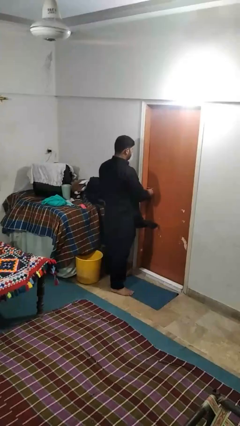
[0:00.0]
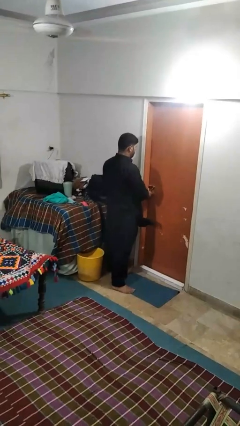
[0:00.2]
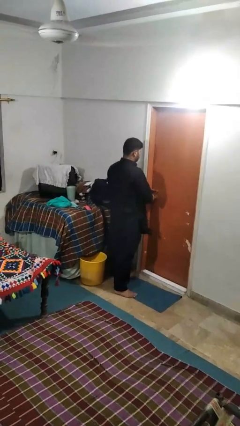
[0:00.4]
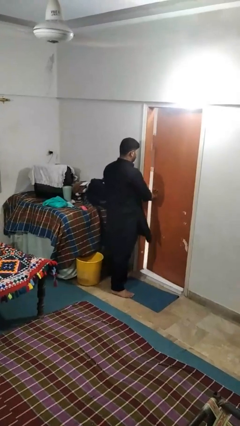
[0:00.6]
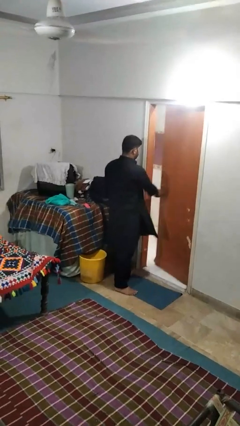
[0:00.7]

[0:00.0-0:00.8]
person opens facility door

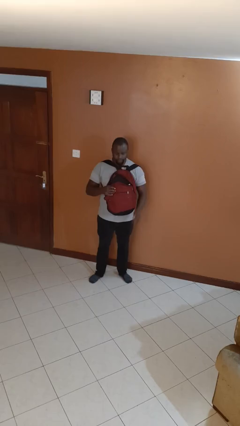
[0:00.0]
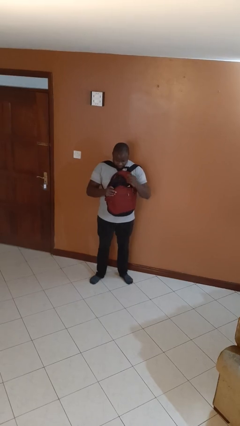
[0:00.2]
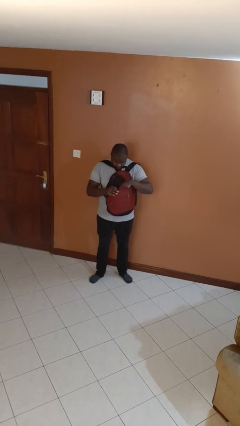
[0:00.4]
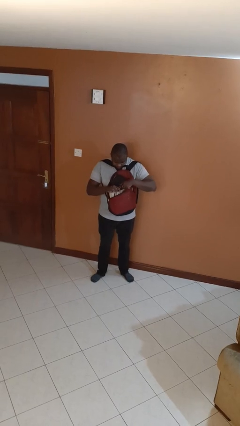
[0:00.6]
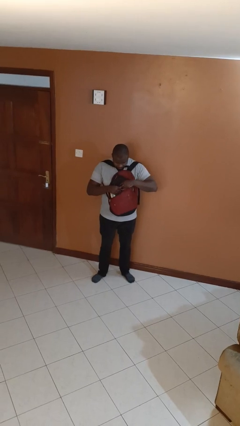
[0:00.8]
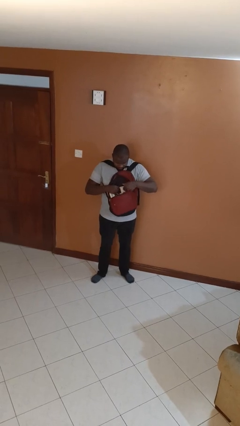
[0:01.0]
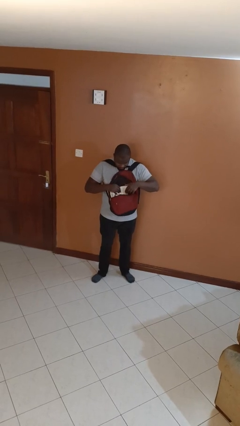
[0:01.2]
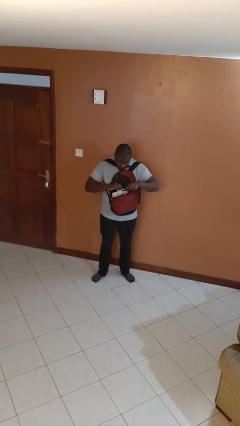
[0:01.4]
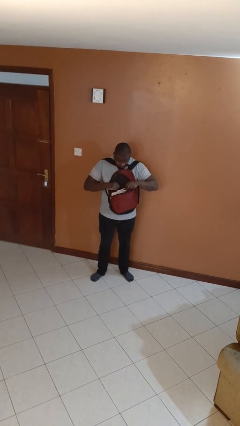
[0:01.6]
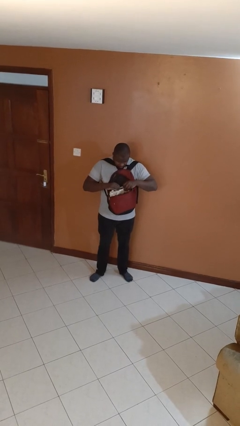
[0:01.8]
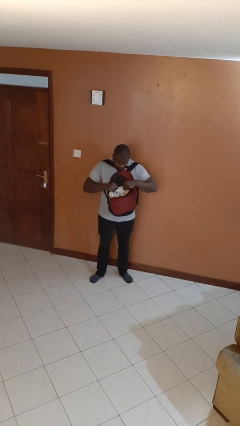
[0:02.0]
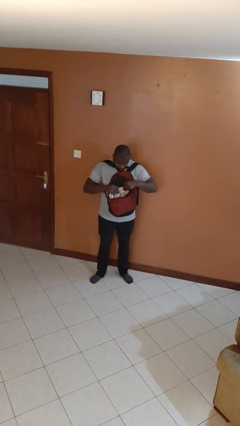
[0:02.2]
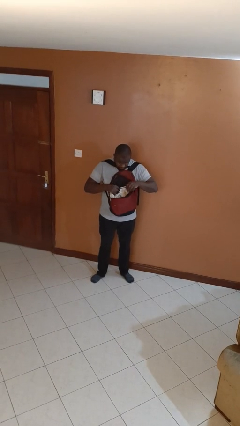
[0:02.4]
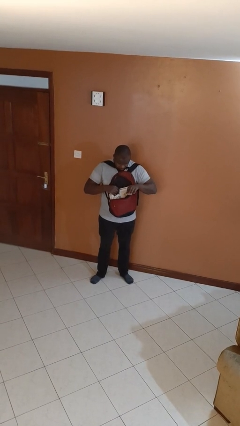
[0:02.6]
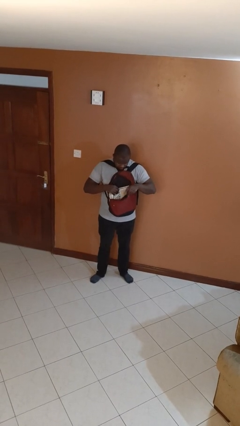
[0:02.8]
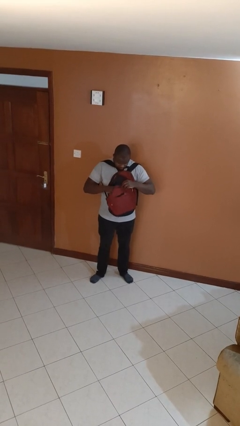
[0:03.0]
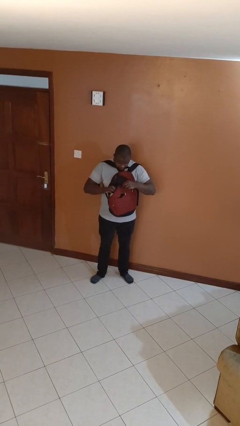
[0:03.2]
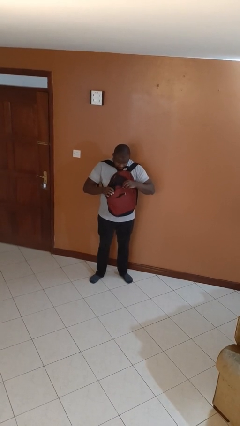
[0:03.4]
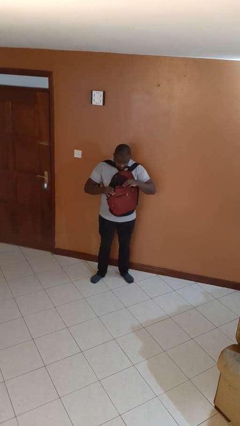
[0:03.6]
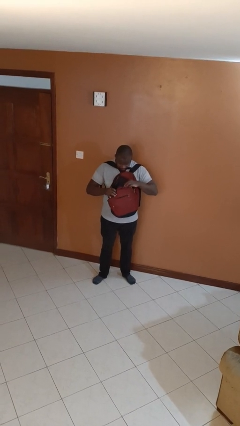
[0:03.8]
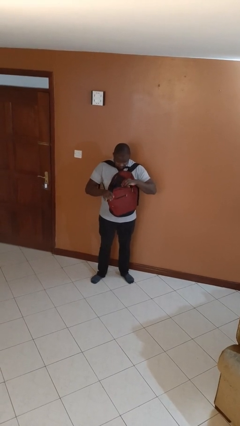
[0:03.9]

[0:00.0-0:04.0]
person searches in backpack

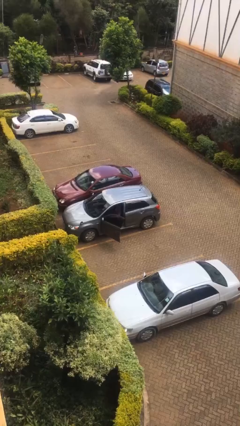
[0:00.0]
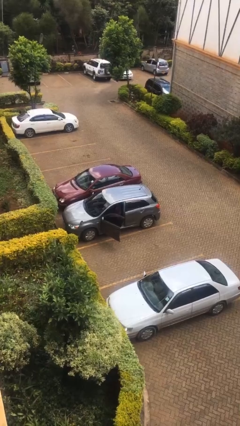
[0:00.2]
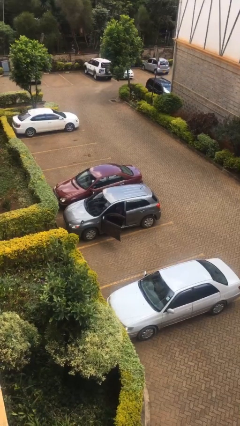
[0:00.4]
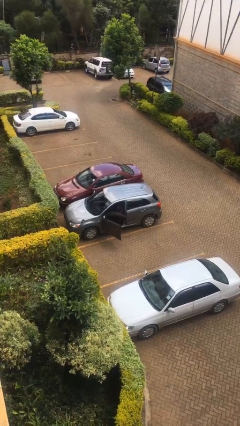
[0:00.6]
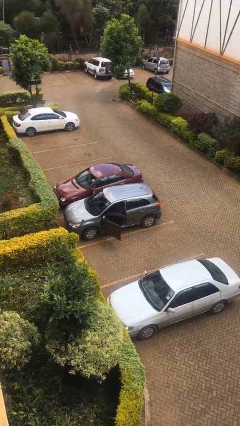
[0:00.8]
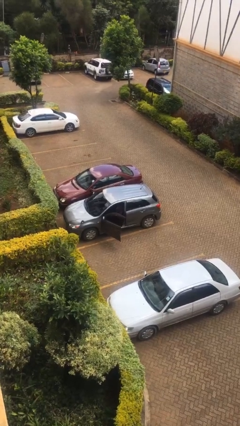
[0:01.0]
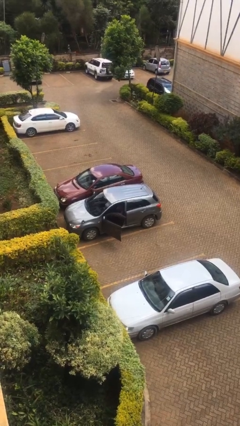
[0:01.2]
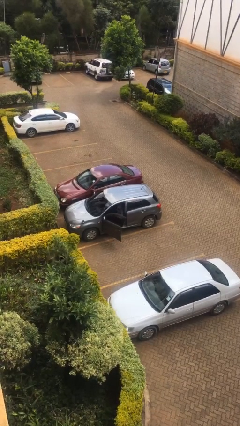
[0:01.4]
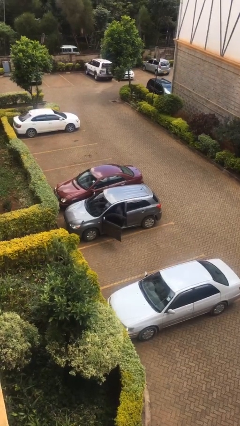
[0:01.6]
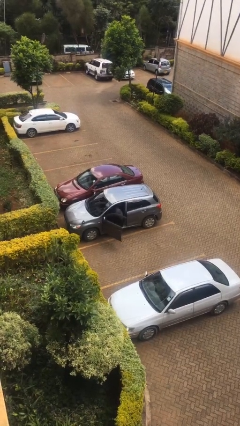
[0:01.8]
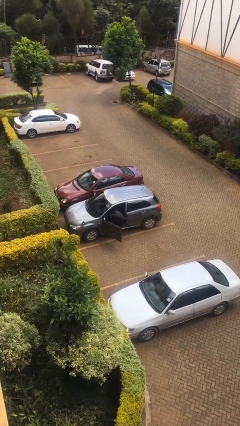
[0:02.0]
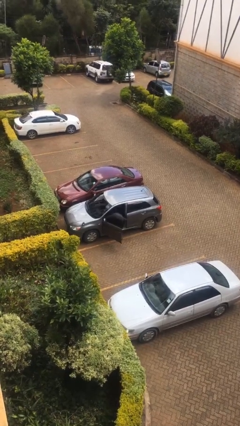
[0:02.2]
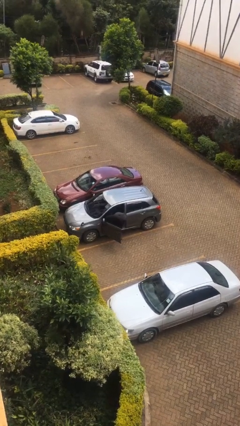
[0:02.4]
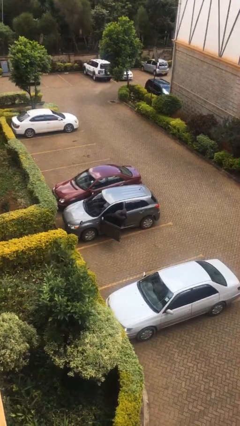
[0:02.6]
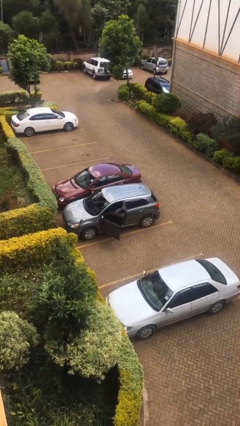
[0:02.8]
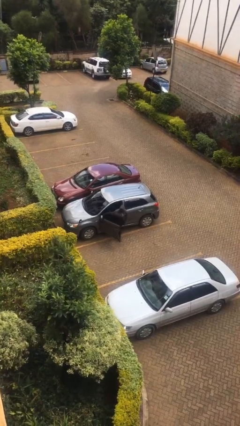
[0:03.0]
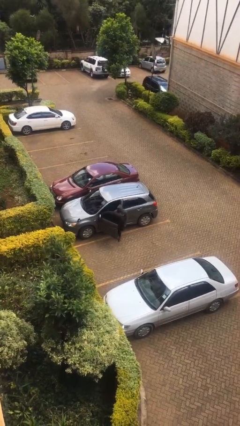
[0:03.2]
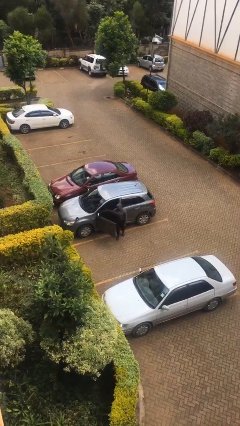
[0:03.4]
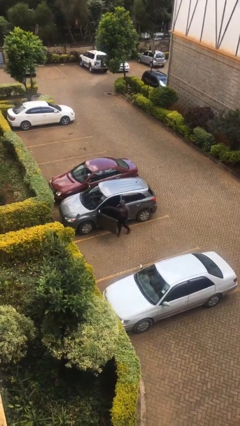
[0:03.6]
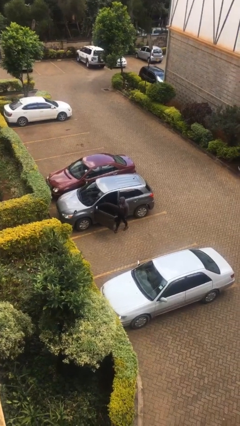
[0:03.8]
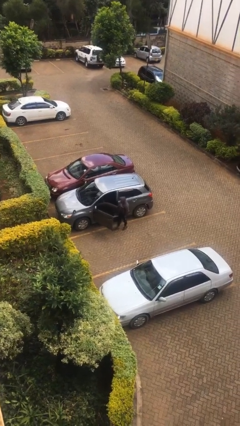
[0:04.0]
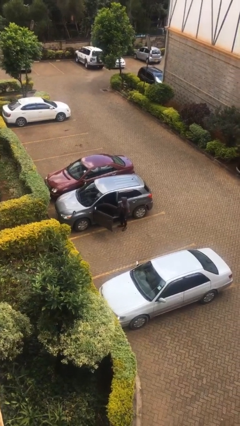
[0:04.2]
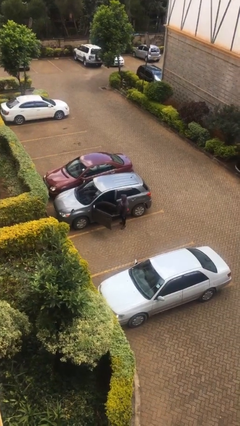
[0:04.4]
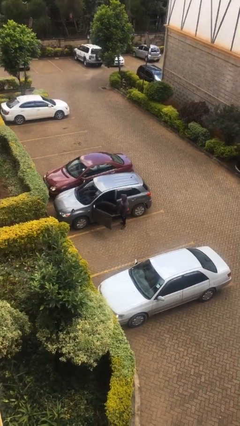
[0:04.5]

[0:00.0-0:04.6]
person exits car

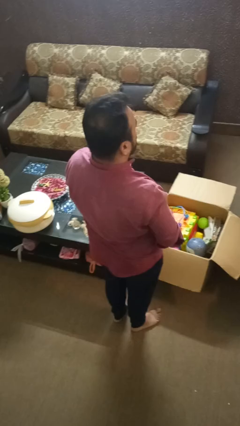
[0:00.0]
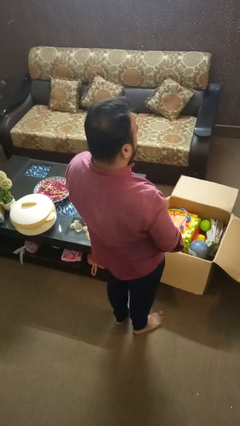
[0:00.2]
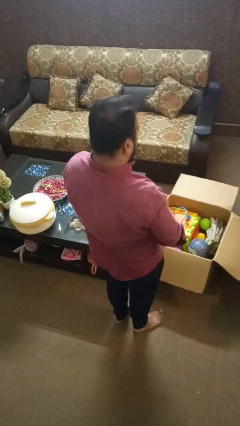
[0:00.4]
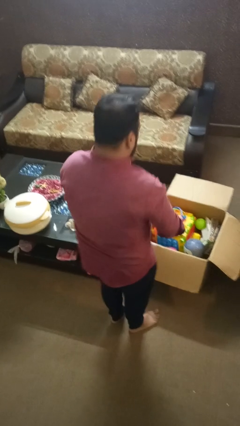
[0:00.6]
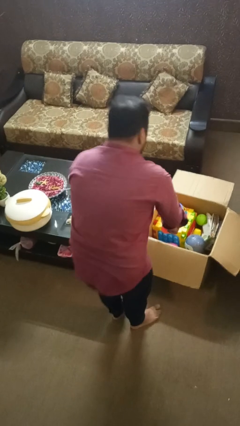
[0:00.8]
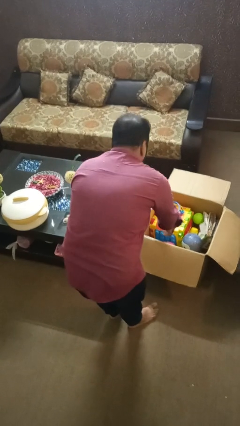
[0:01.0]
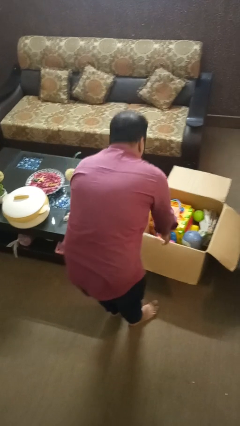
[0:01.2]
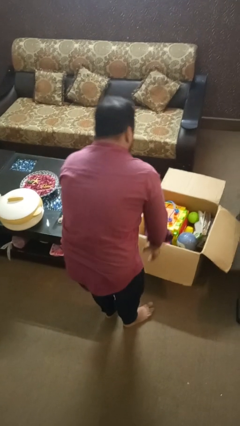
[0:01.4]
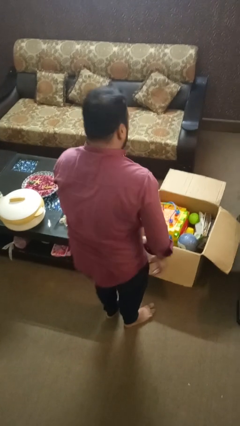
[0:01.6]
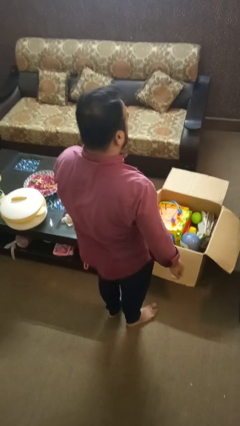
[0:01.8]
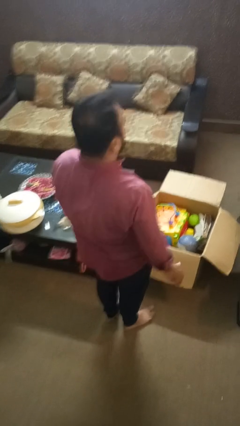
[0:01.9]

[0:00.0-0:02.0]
person puts object into box

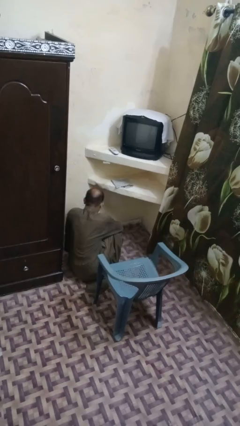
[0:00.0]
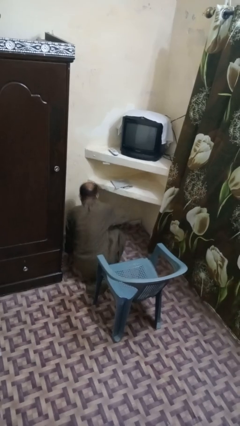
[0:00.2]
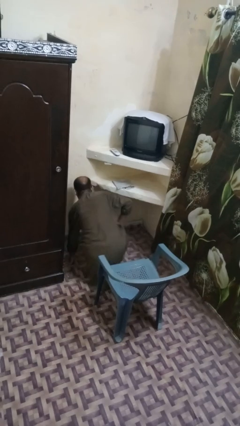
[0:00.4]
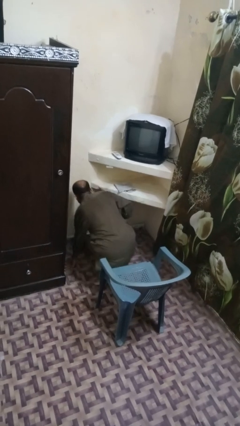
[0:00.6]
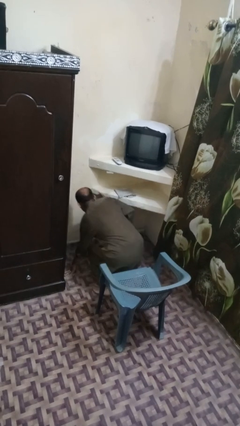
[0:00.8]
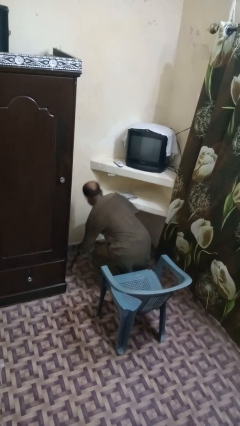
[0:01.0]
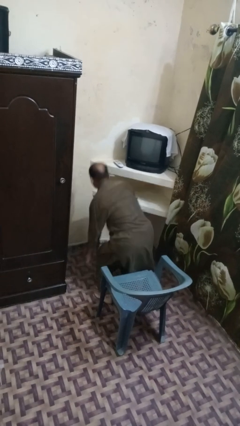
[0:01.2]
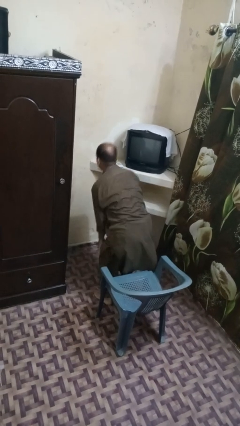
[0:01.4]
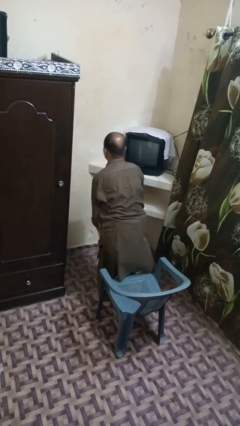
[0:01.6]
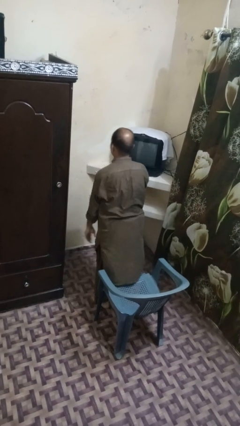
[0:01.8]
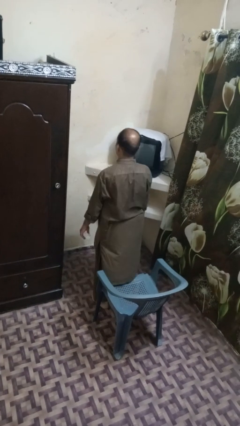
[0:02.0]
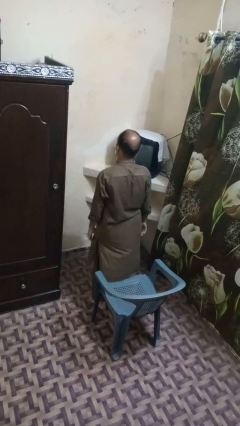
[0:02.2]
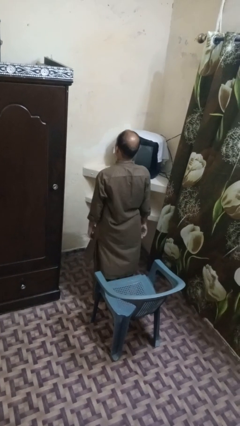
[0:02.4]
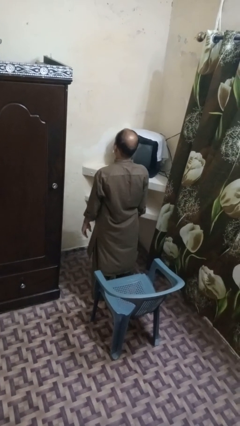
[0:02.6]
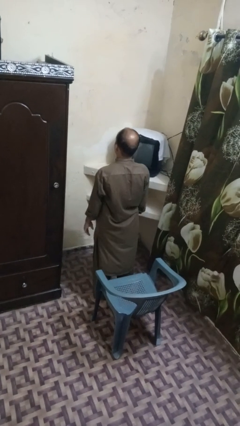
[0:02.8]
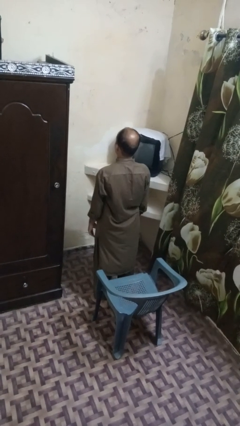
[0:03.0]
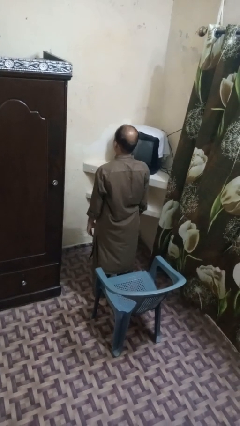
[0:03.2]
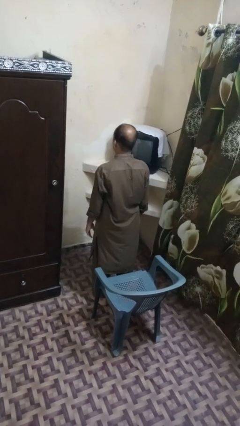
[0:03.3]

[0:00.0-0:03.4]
person stands up from floor

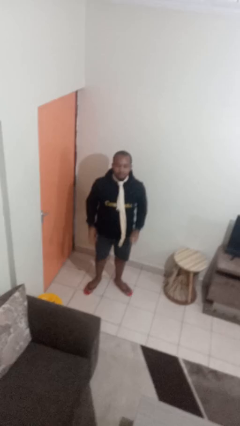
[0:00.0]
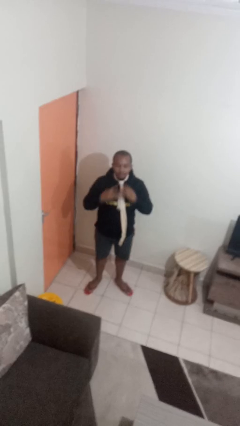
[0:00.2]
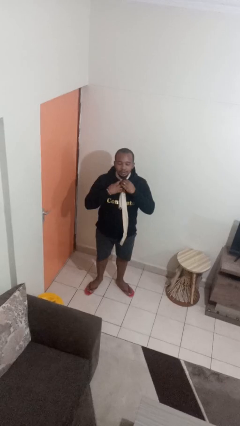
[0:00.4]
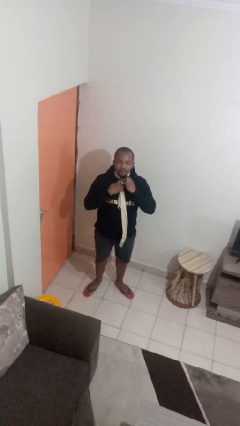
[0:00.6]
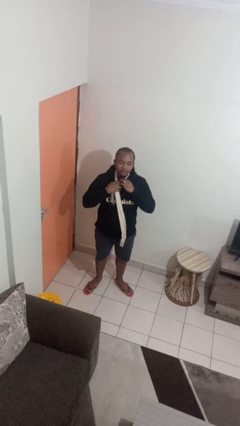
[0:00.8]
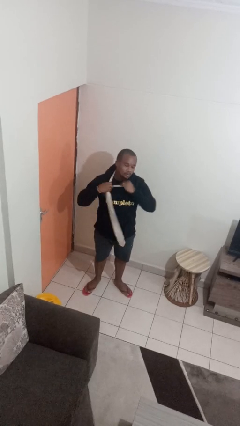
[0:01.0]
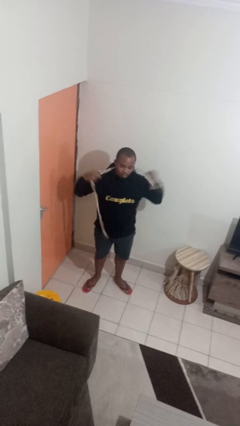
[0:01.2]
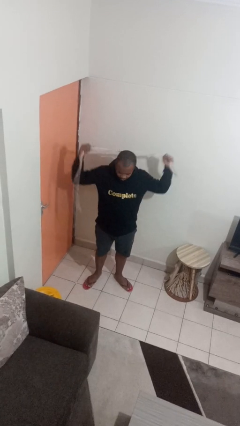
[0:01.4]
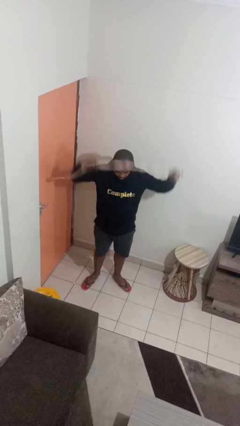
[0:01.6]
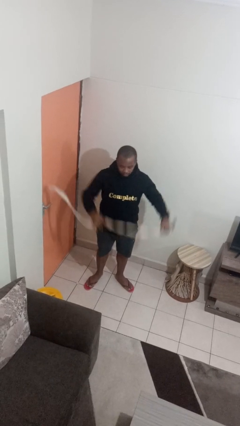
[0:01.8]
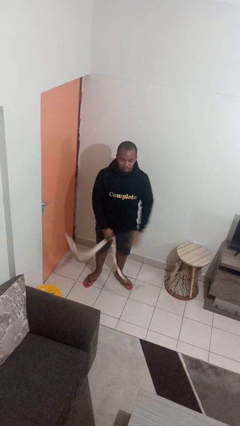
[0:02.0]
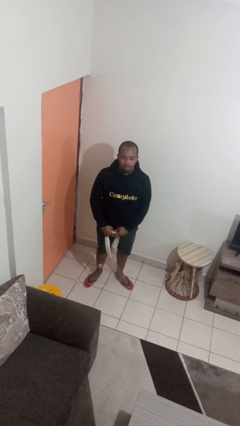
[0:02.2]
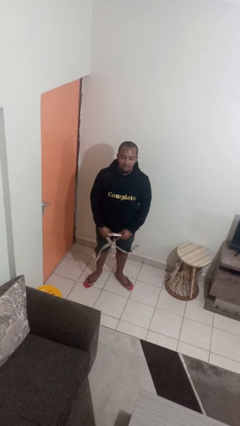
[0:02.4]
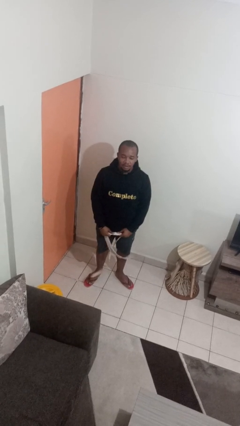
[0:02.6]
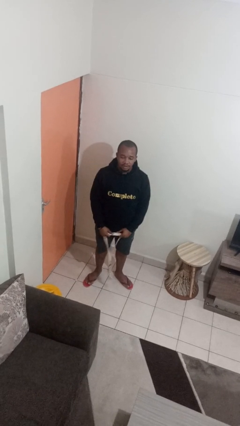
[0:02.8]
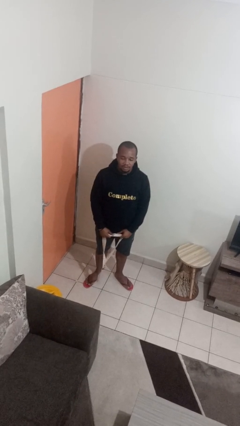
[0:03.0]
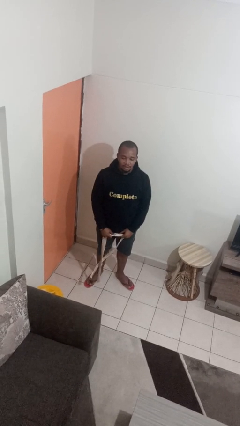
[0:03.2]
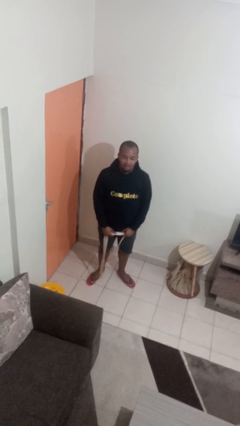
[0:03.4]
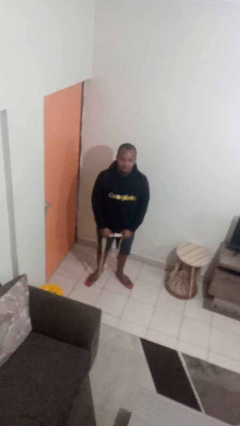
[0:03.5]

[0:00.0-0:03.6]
person takes off necktie
